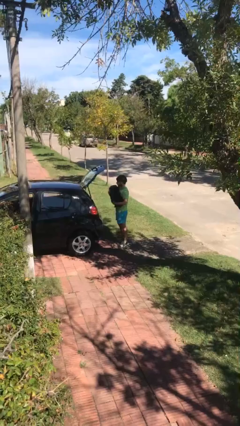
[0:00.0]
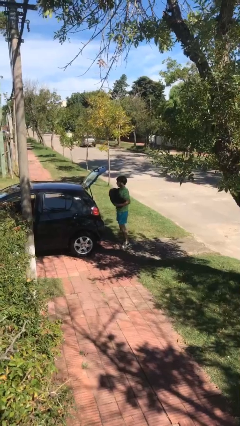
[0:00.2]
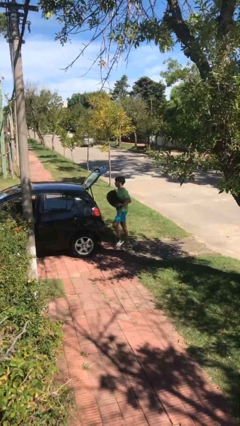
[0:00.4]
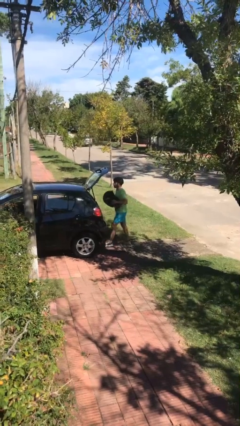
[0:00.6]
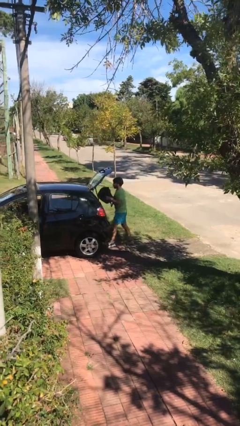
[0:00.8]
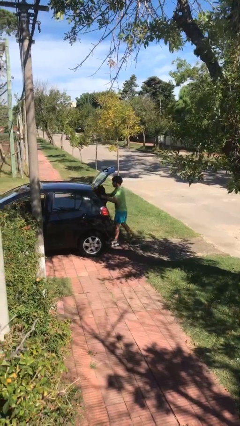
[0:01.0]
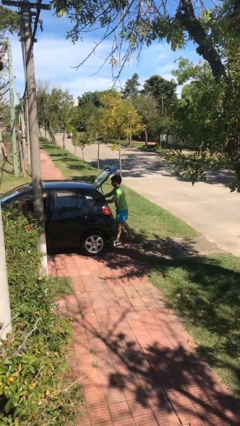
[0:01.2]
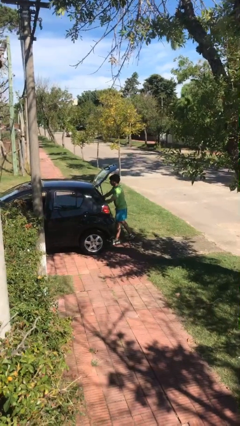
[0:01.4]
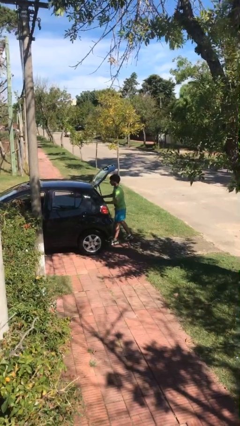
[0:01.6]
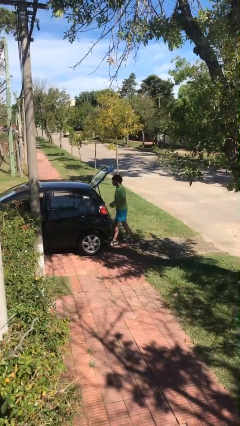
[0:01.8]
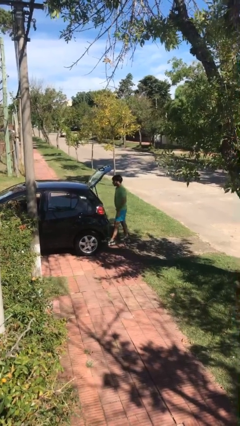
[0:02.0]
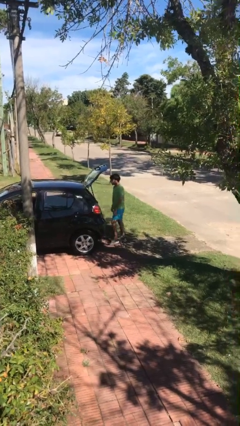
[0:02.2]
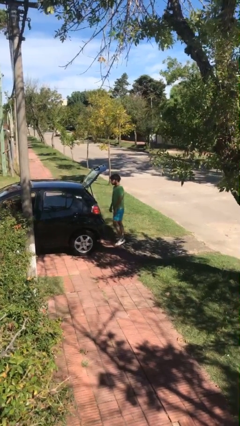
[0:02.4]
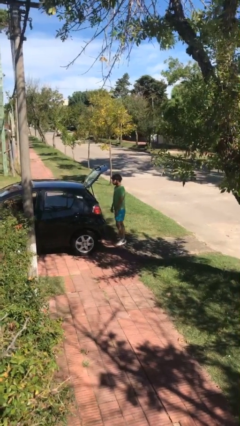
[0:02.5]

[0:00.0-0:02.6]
person loads car

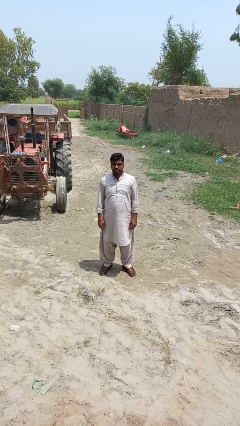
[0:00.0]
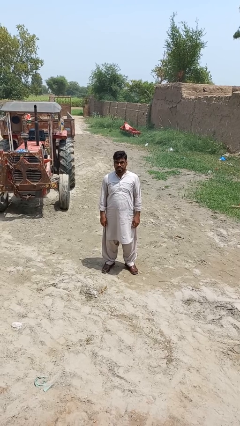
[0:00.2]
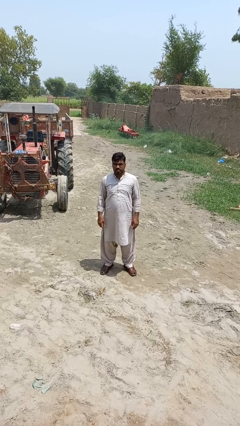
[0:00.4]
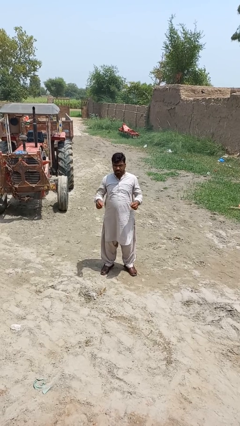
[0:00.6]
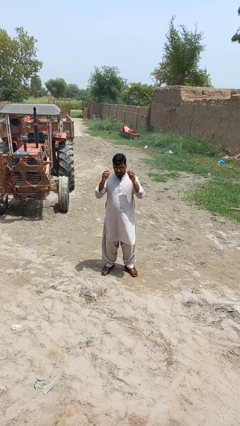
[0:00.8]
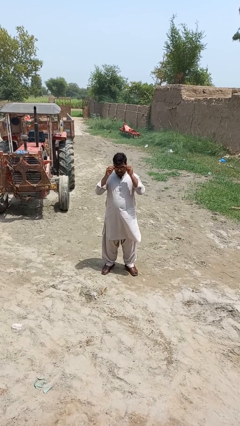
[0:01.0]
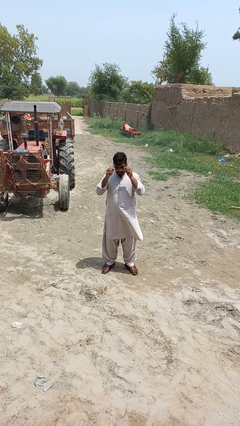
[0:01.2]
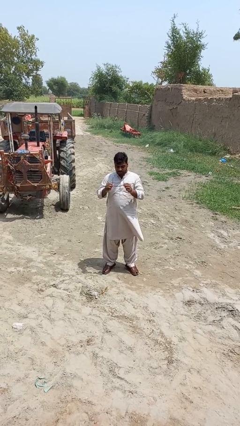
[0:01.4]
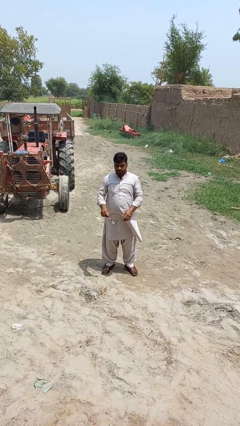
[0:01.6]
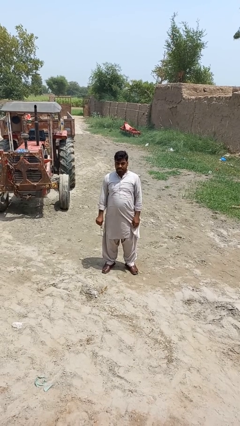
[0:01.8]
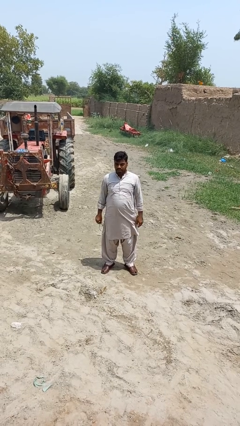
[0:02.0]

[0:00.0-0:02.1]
person takes off glasses

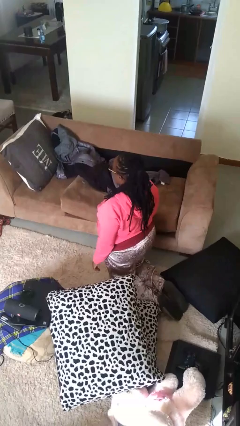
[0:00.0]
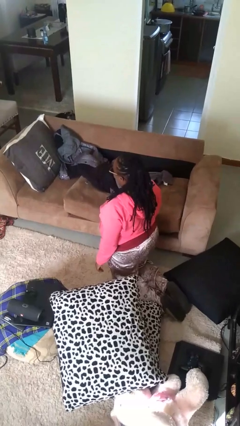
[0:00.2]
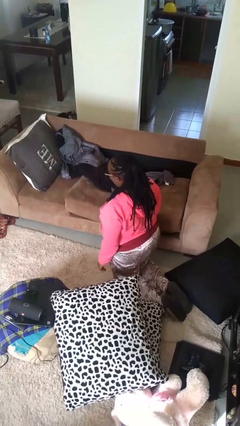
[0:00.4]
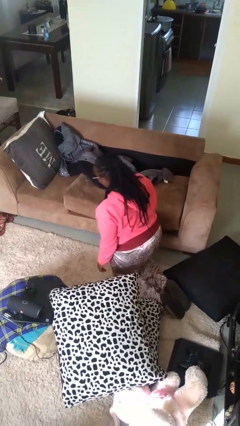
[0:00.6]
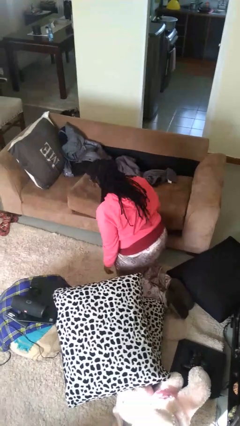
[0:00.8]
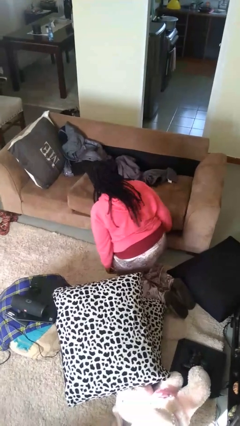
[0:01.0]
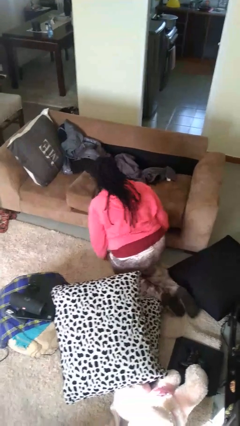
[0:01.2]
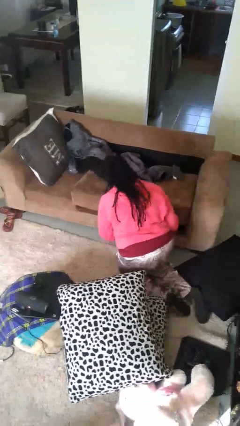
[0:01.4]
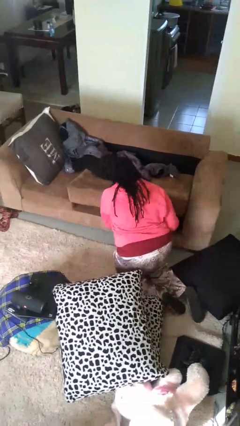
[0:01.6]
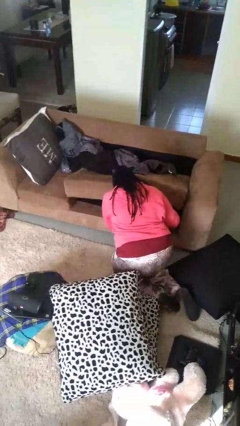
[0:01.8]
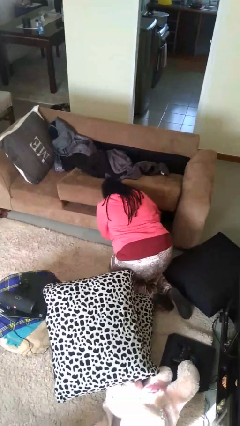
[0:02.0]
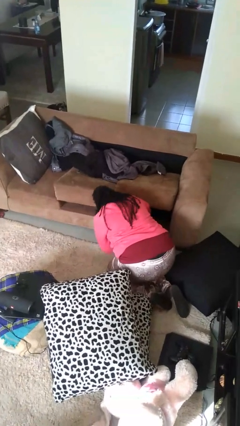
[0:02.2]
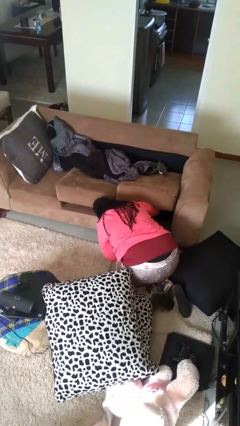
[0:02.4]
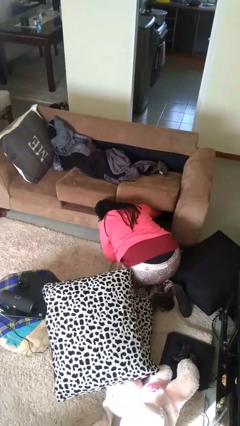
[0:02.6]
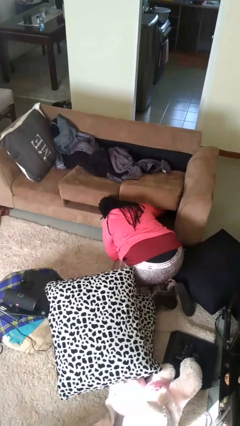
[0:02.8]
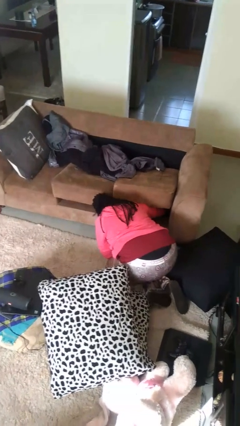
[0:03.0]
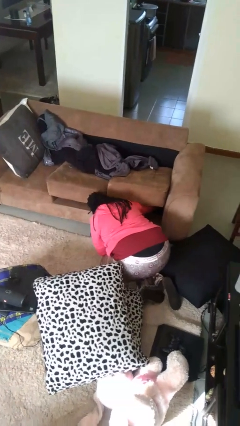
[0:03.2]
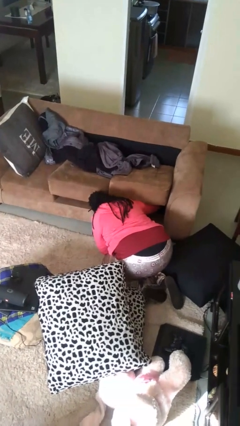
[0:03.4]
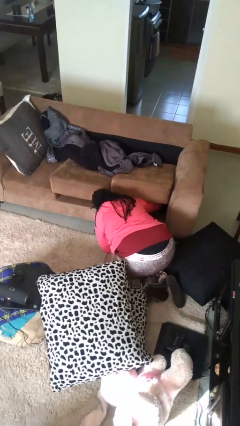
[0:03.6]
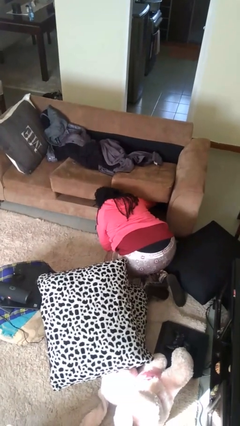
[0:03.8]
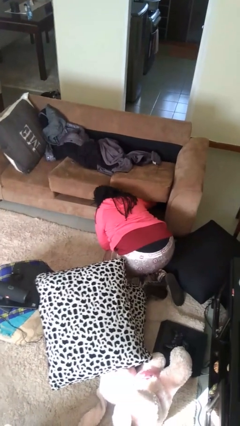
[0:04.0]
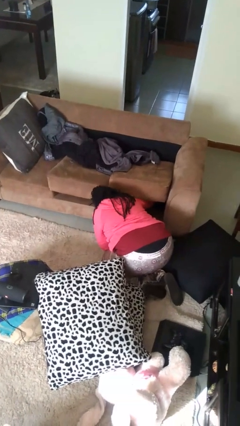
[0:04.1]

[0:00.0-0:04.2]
person searches under couch

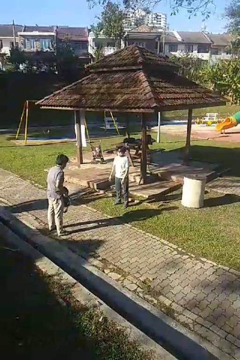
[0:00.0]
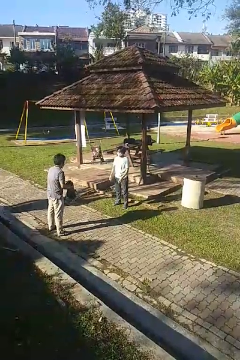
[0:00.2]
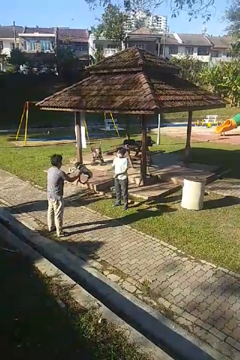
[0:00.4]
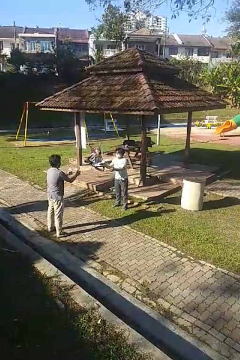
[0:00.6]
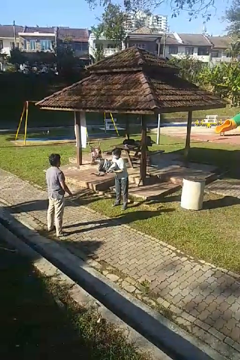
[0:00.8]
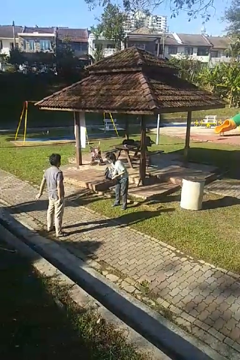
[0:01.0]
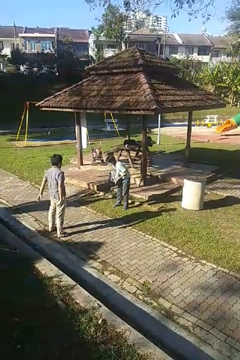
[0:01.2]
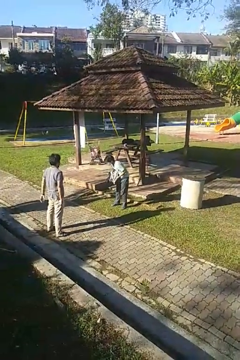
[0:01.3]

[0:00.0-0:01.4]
person catches object from person

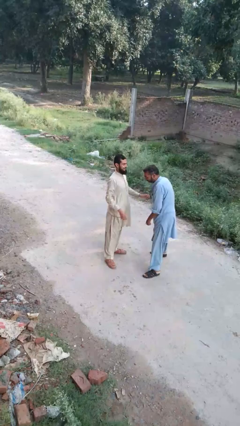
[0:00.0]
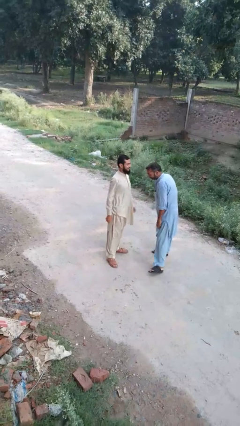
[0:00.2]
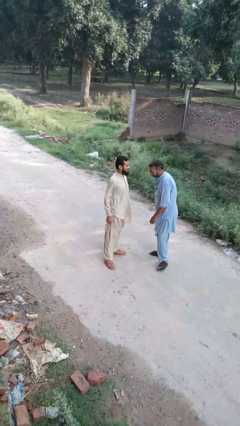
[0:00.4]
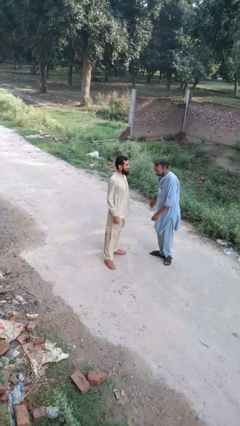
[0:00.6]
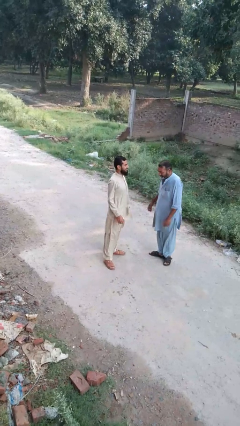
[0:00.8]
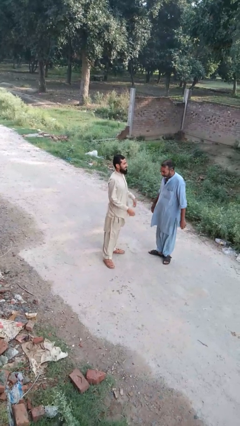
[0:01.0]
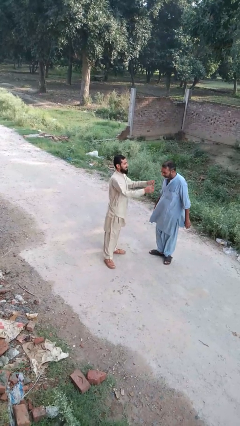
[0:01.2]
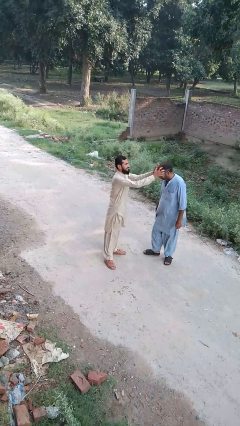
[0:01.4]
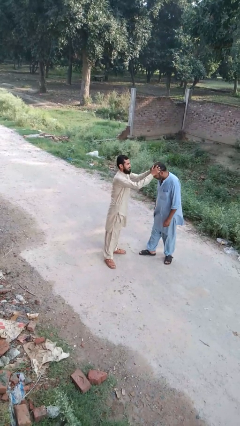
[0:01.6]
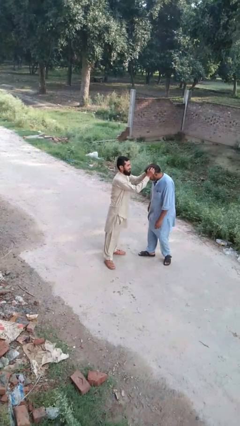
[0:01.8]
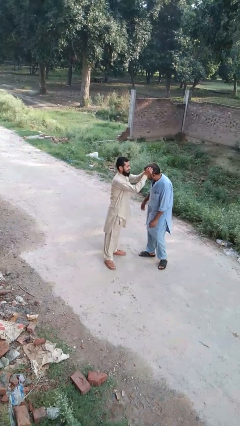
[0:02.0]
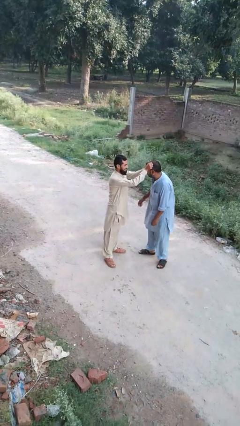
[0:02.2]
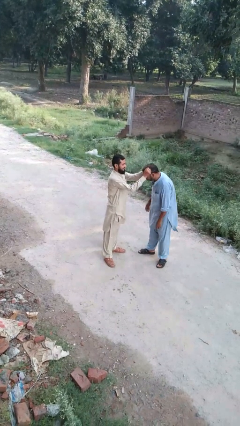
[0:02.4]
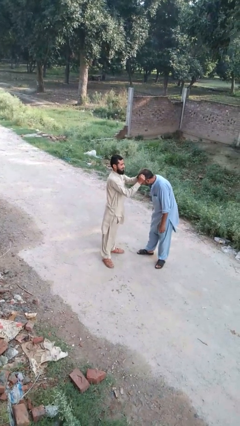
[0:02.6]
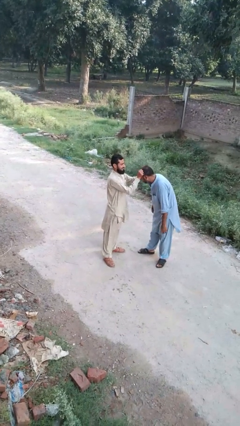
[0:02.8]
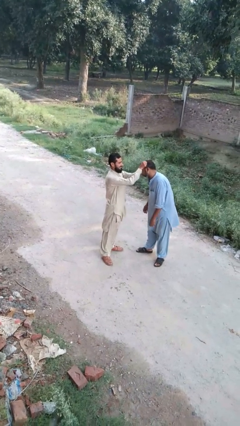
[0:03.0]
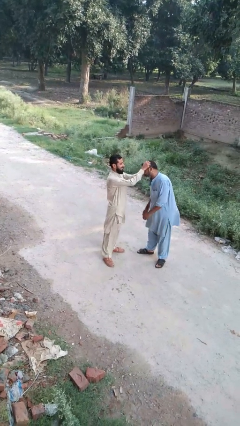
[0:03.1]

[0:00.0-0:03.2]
person grabs person by hair

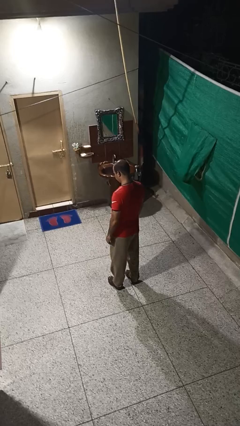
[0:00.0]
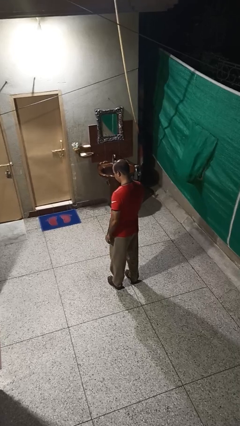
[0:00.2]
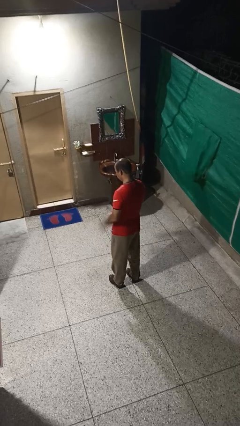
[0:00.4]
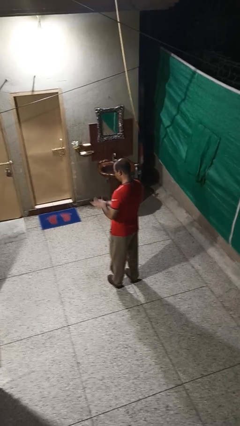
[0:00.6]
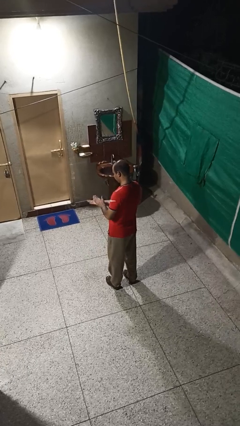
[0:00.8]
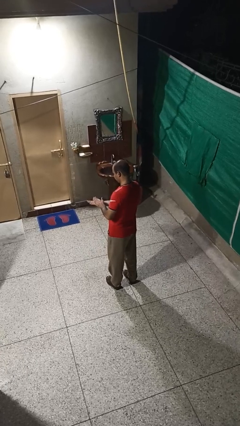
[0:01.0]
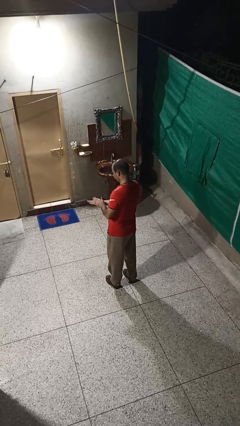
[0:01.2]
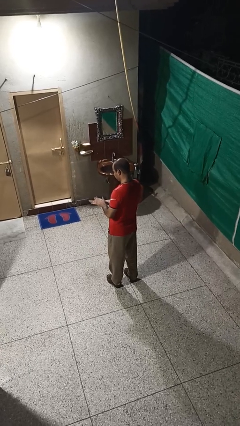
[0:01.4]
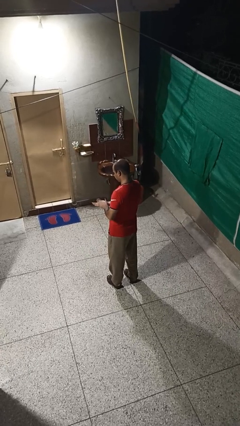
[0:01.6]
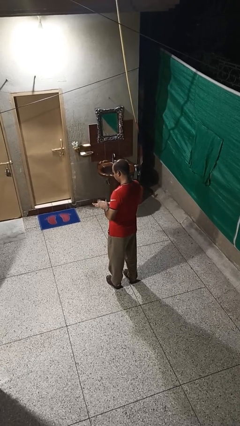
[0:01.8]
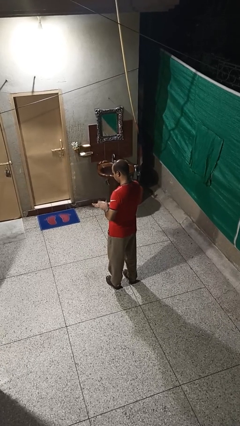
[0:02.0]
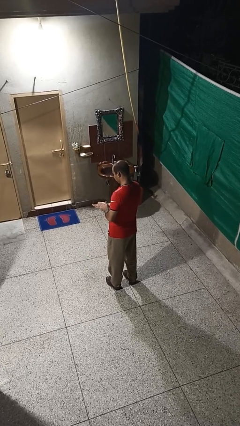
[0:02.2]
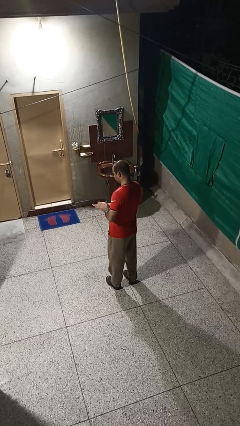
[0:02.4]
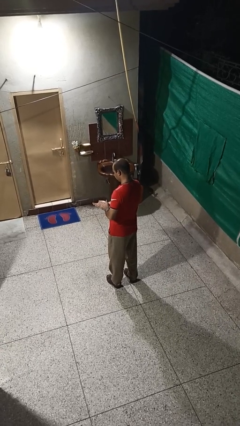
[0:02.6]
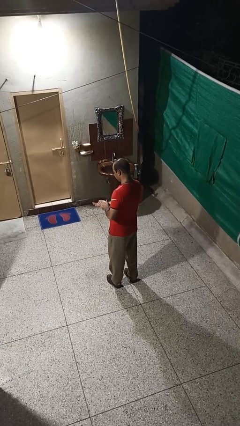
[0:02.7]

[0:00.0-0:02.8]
person claps hands

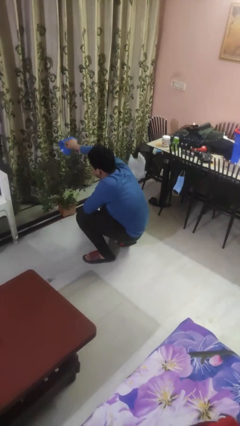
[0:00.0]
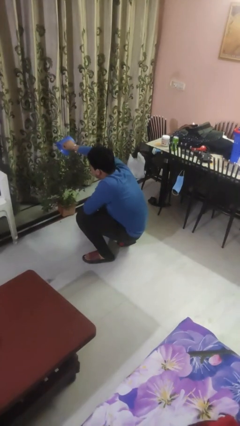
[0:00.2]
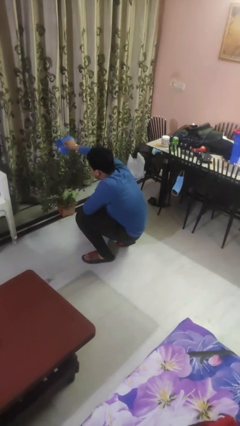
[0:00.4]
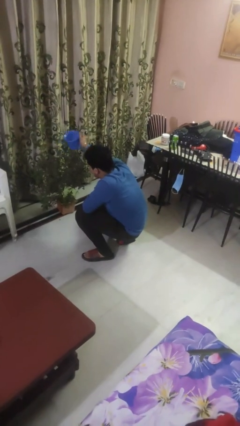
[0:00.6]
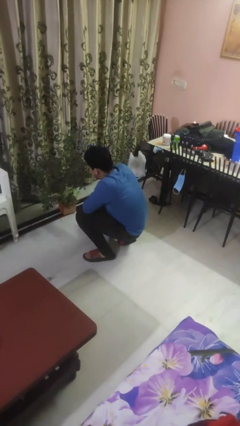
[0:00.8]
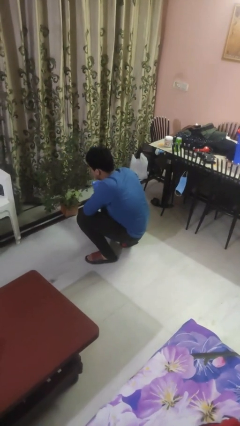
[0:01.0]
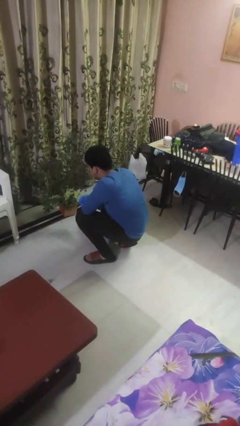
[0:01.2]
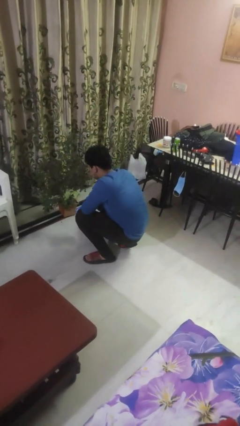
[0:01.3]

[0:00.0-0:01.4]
person waters houseplant
